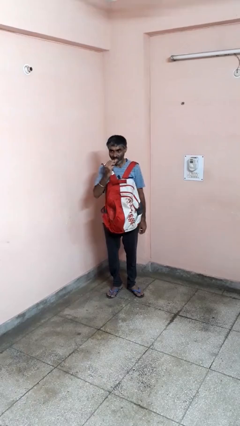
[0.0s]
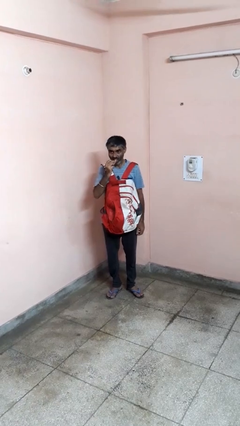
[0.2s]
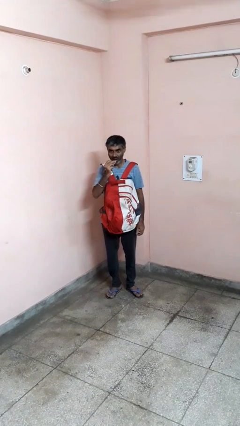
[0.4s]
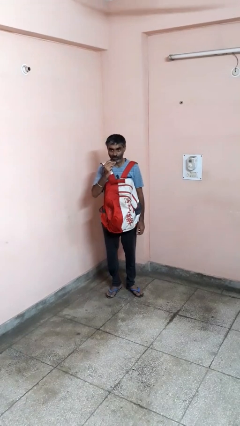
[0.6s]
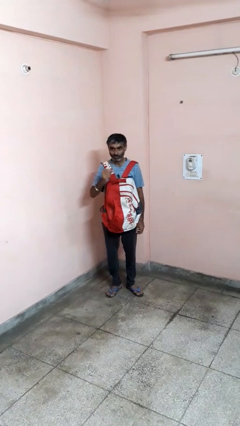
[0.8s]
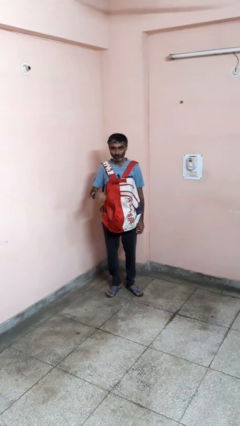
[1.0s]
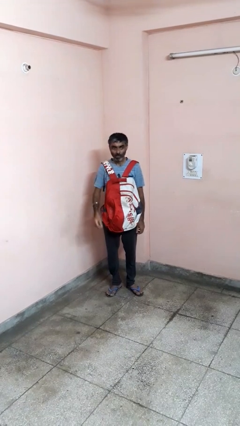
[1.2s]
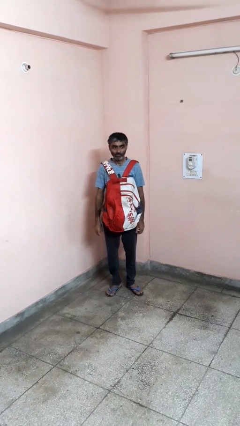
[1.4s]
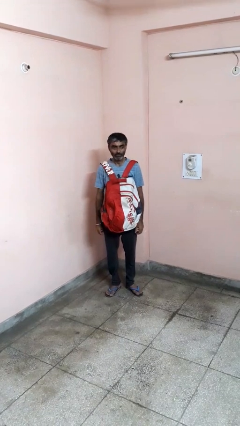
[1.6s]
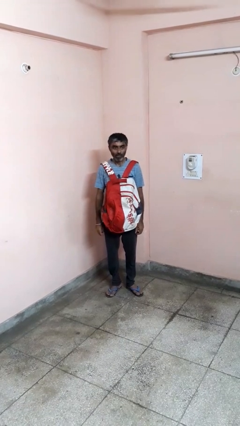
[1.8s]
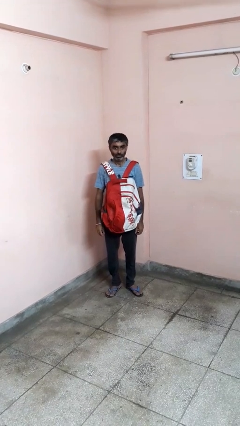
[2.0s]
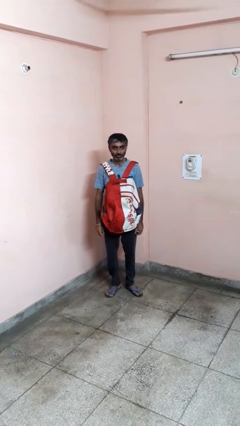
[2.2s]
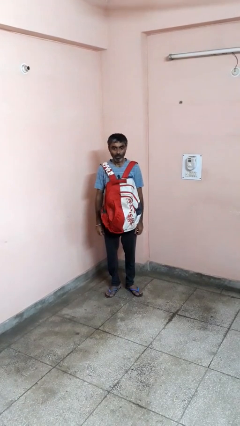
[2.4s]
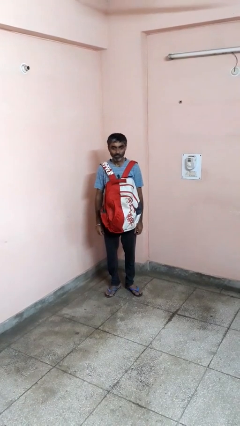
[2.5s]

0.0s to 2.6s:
person eats snack from bag

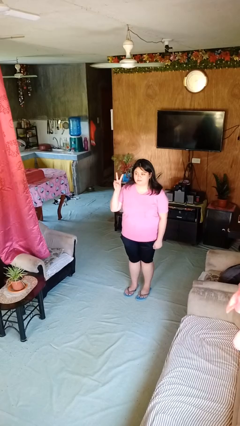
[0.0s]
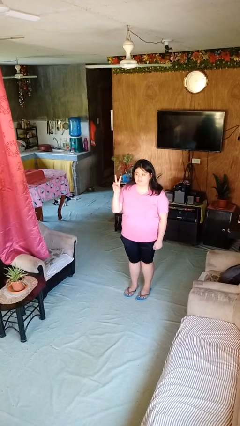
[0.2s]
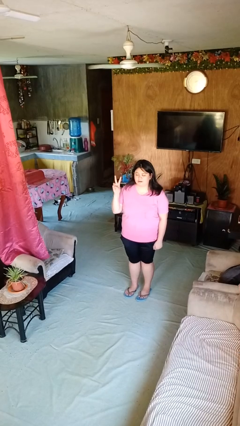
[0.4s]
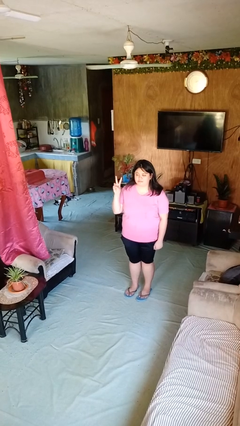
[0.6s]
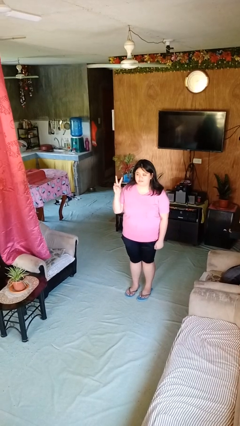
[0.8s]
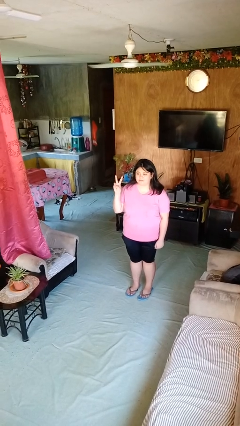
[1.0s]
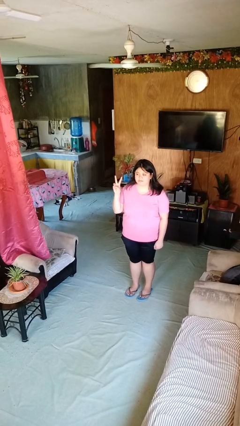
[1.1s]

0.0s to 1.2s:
person gestures peace

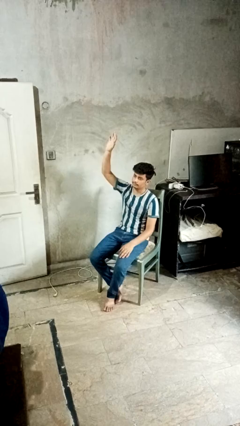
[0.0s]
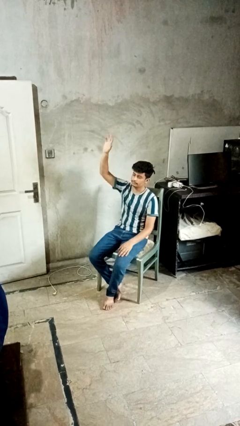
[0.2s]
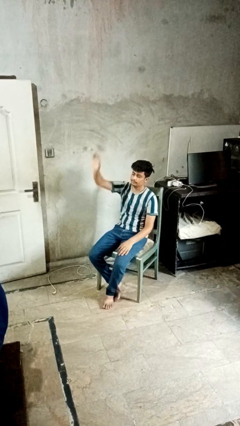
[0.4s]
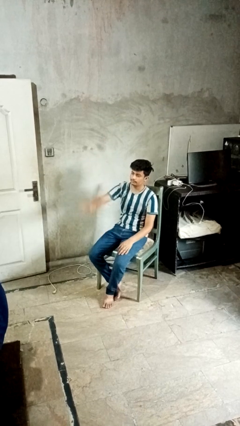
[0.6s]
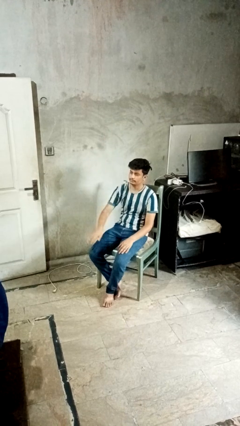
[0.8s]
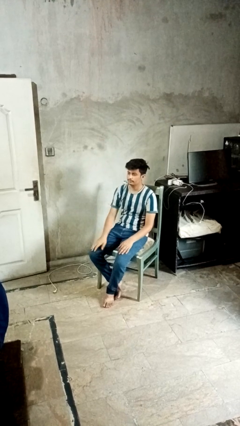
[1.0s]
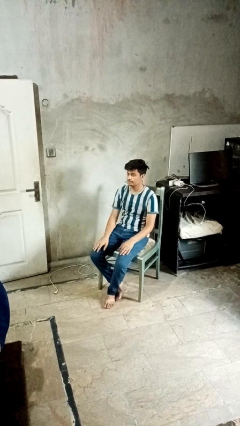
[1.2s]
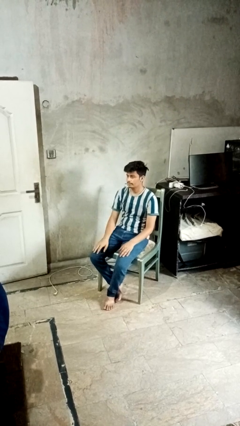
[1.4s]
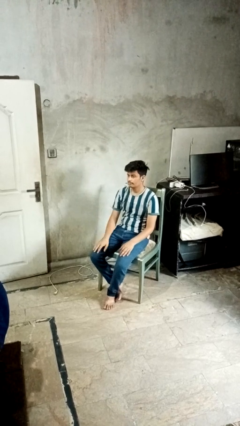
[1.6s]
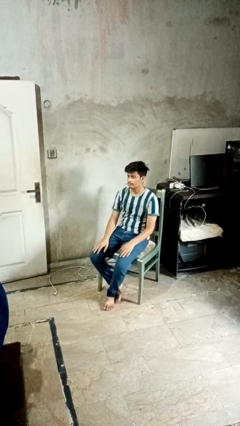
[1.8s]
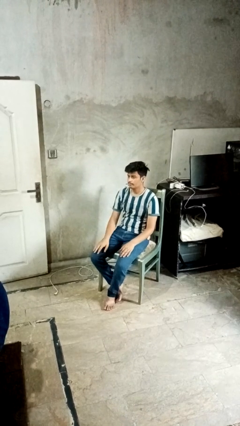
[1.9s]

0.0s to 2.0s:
person gestures lower hand

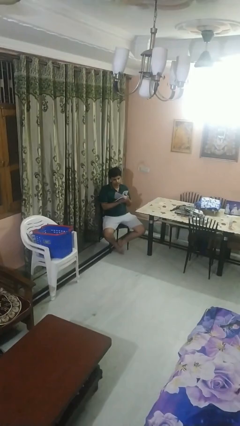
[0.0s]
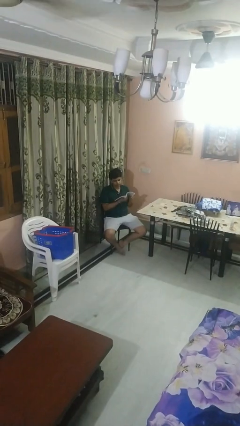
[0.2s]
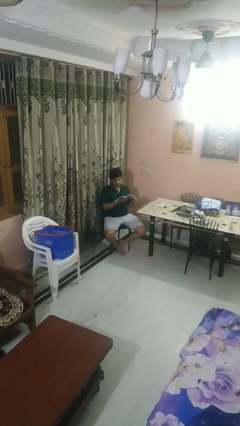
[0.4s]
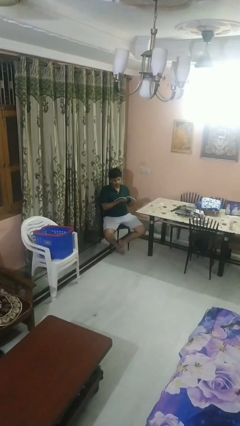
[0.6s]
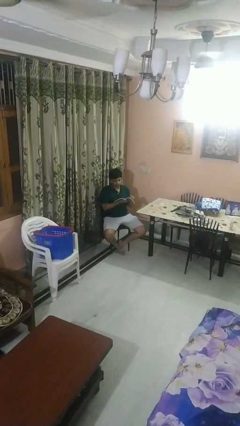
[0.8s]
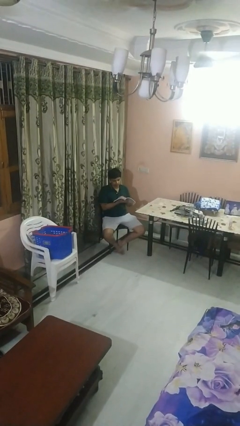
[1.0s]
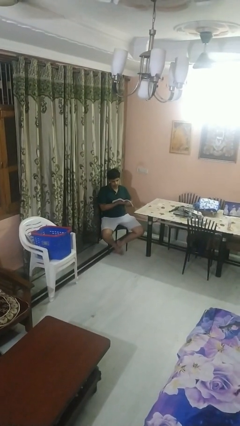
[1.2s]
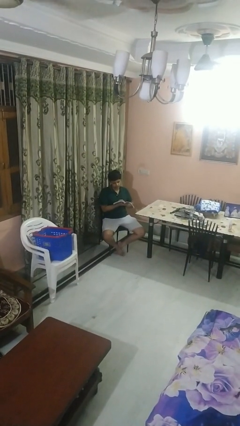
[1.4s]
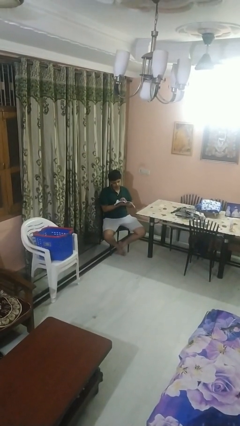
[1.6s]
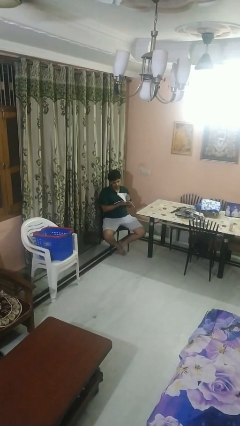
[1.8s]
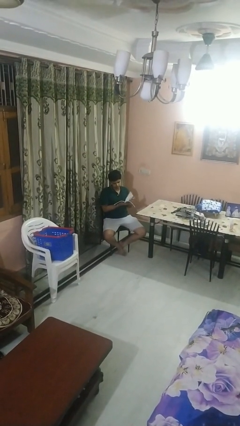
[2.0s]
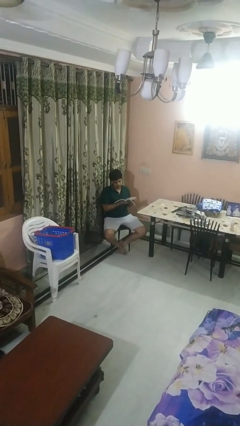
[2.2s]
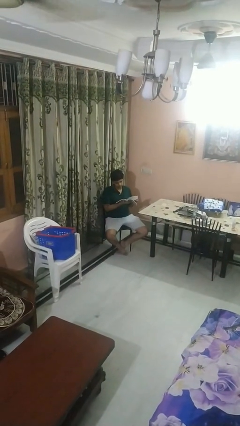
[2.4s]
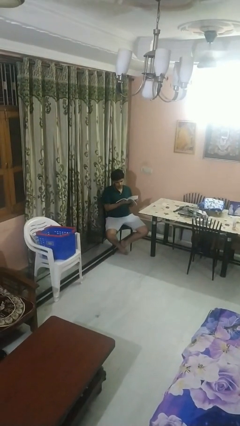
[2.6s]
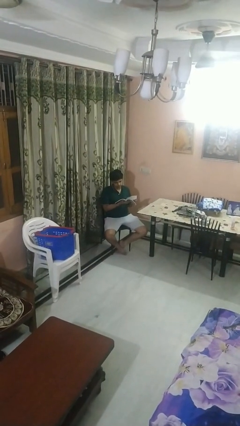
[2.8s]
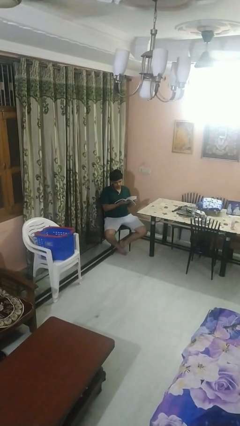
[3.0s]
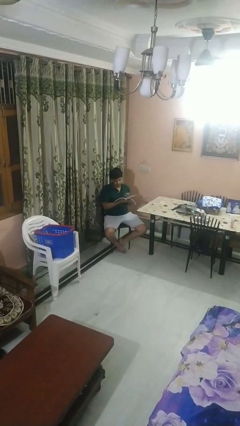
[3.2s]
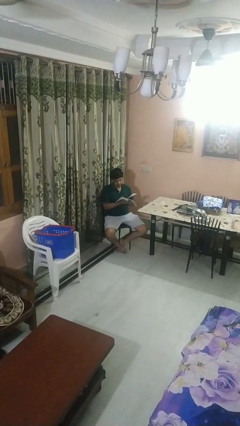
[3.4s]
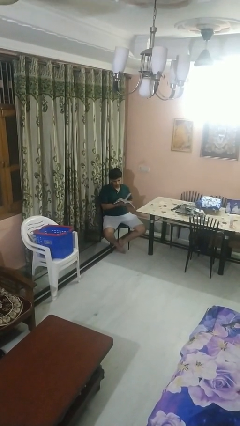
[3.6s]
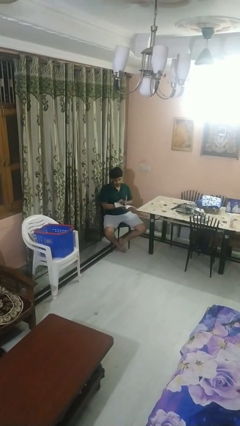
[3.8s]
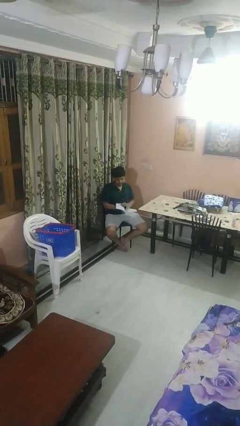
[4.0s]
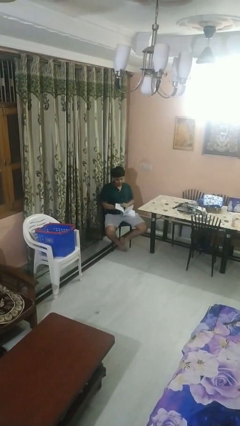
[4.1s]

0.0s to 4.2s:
person reads magazine

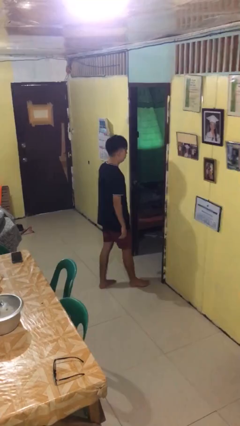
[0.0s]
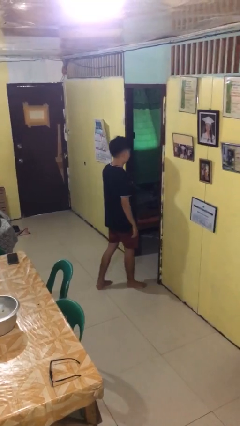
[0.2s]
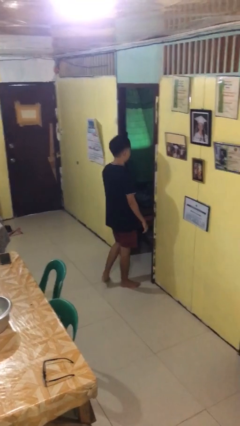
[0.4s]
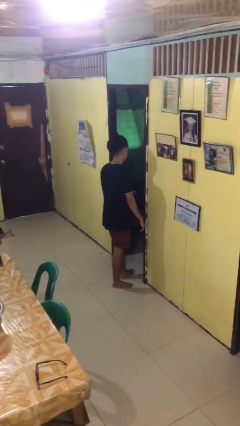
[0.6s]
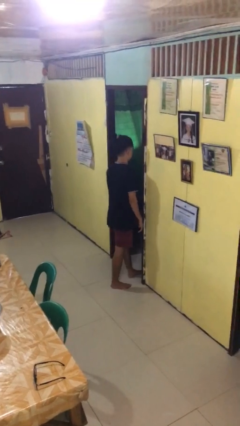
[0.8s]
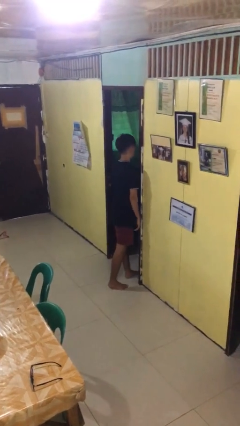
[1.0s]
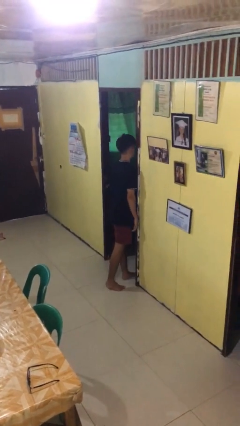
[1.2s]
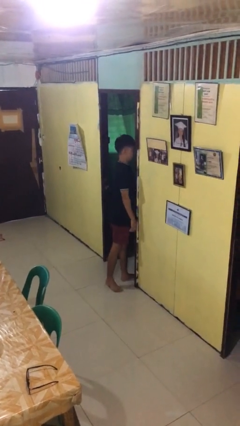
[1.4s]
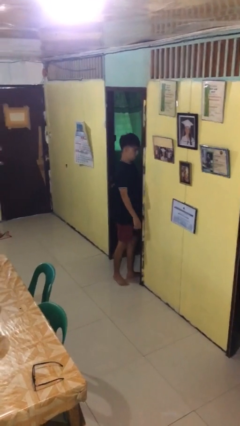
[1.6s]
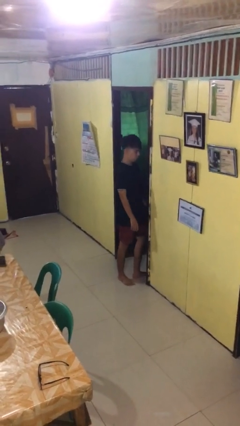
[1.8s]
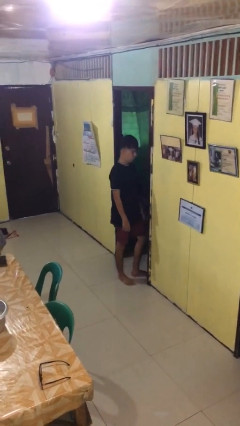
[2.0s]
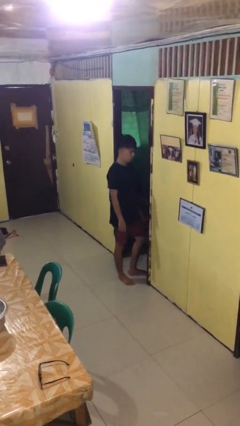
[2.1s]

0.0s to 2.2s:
person bumps into wall

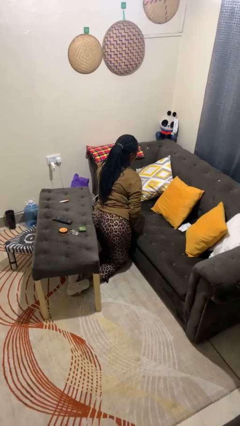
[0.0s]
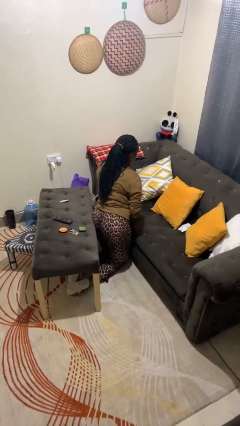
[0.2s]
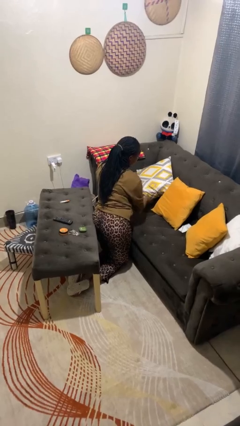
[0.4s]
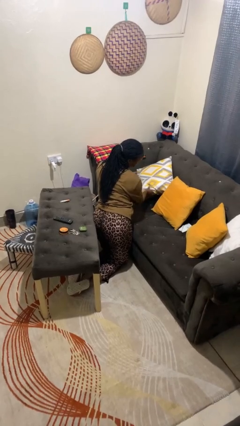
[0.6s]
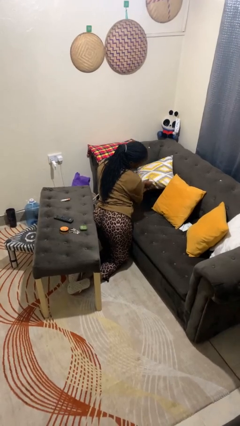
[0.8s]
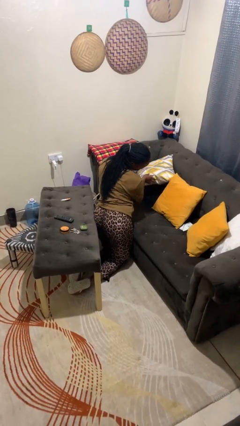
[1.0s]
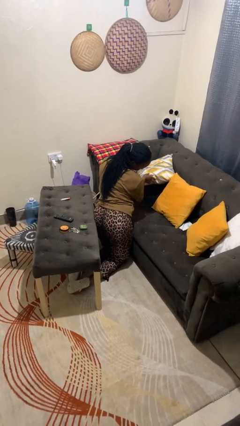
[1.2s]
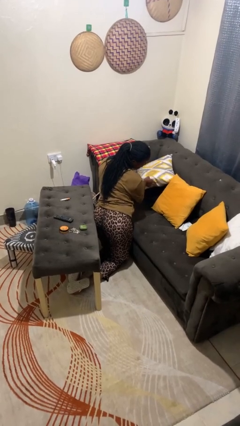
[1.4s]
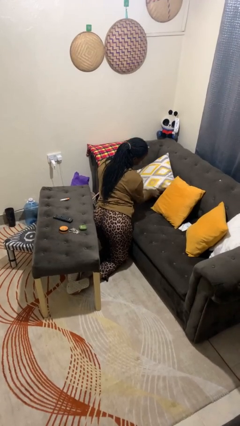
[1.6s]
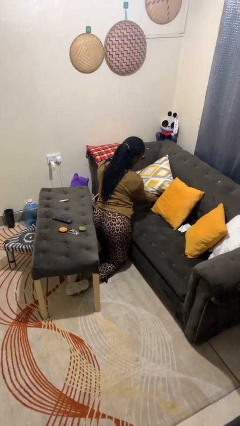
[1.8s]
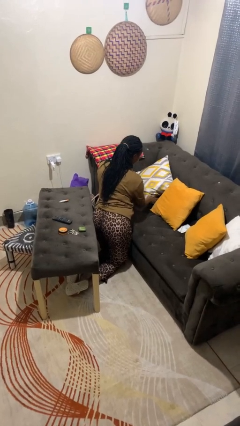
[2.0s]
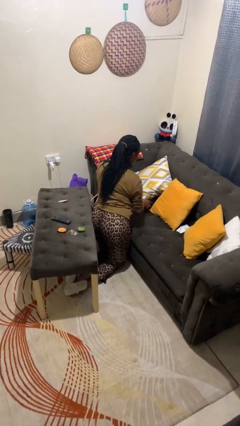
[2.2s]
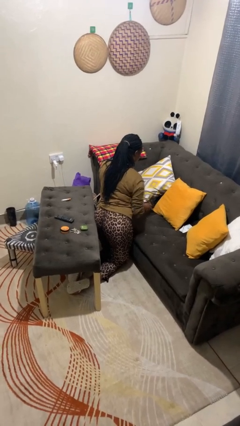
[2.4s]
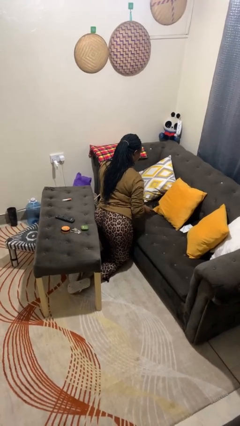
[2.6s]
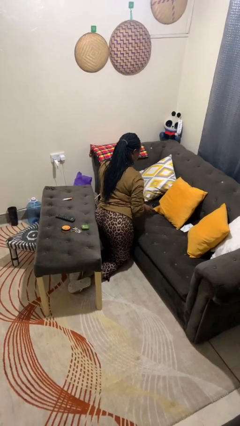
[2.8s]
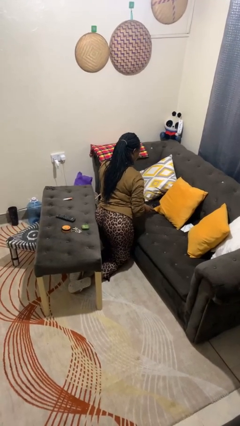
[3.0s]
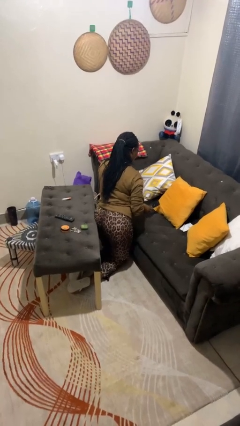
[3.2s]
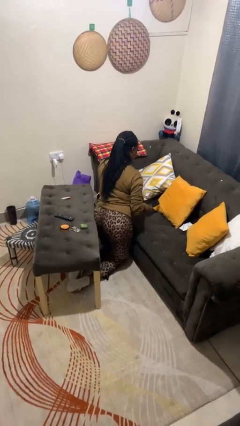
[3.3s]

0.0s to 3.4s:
person searches in couch

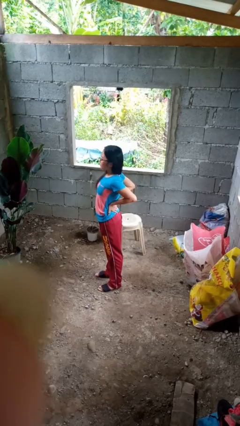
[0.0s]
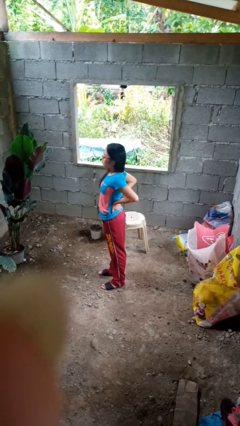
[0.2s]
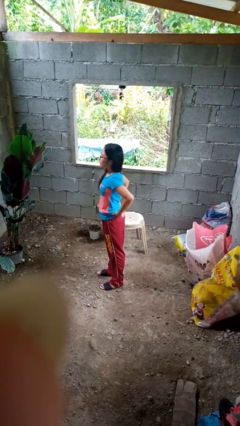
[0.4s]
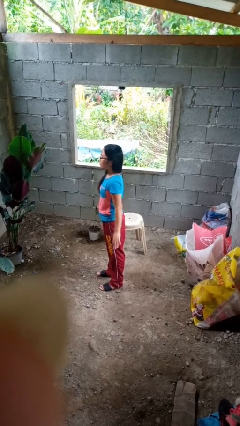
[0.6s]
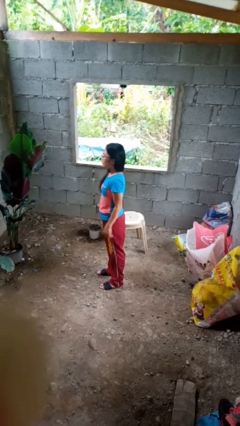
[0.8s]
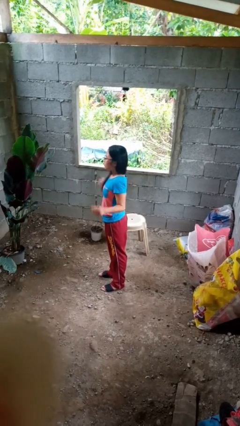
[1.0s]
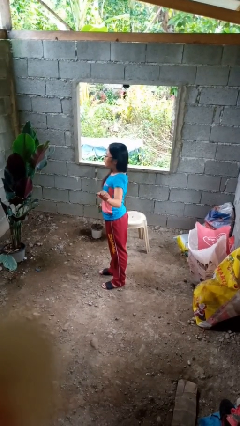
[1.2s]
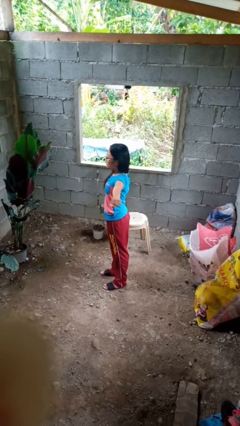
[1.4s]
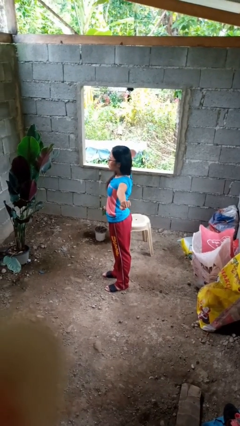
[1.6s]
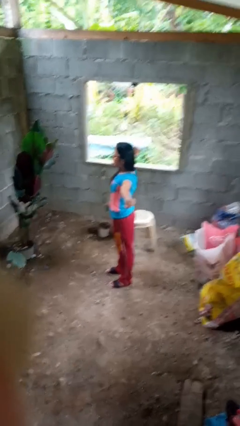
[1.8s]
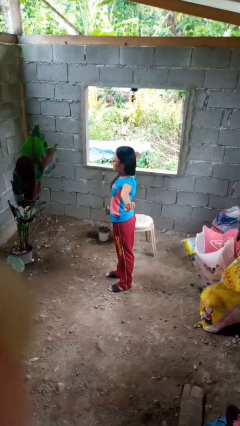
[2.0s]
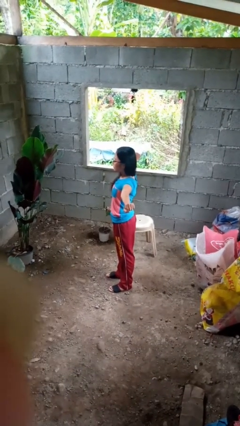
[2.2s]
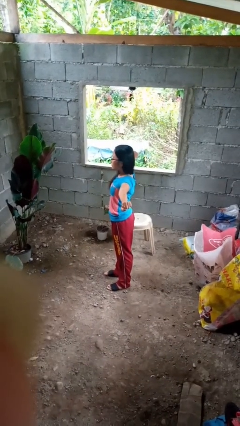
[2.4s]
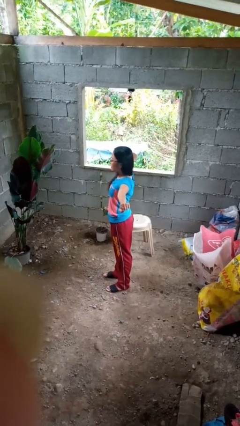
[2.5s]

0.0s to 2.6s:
person stretches arms to side
